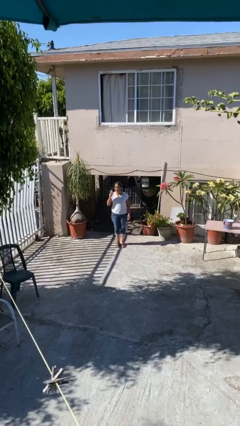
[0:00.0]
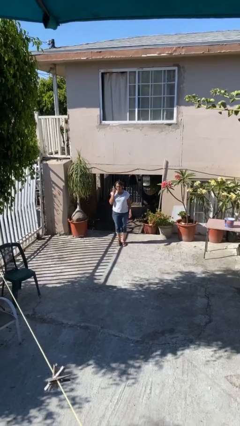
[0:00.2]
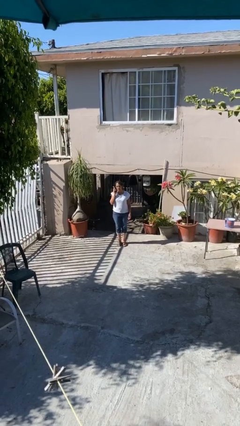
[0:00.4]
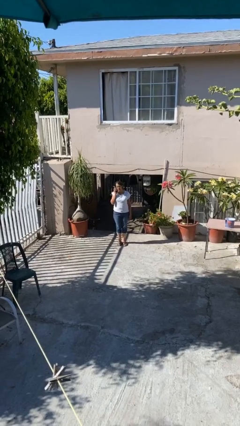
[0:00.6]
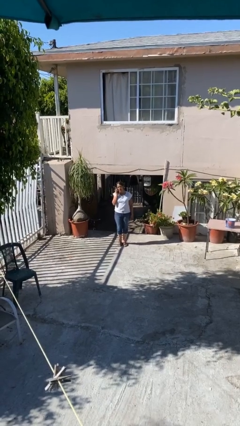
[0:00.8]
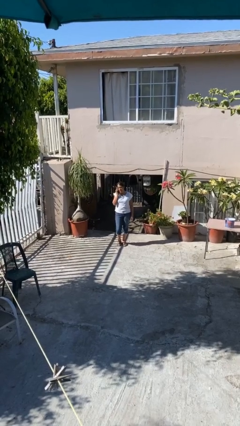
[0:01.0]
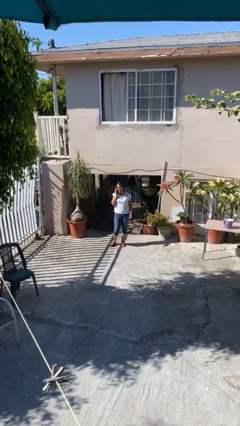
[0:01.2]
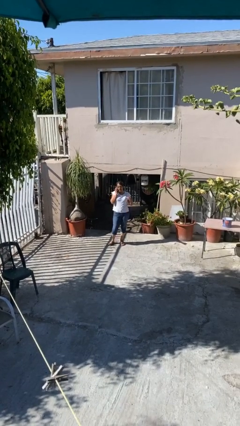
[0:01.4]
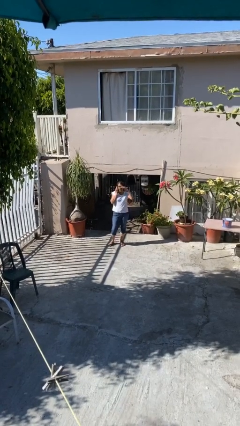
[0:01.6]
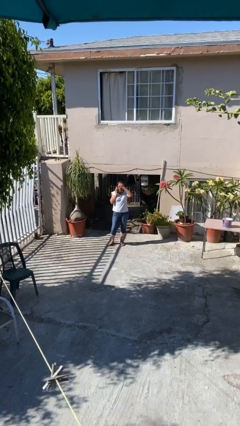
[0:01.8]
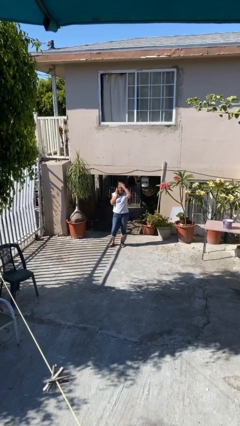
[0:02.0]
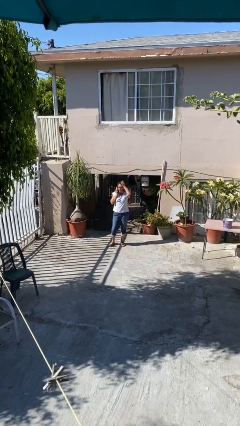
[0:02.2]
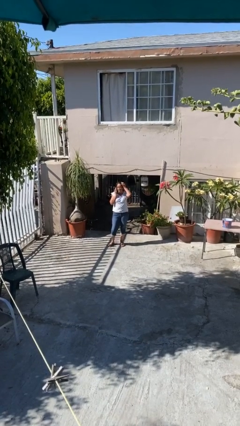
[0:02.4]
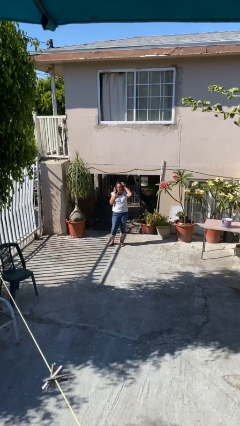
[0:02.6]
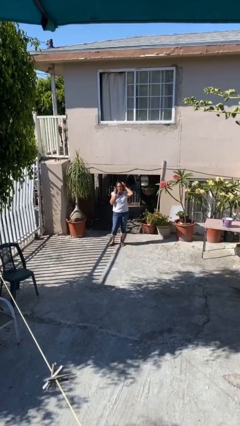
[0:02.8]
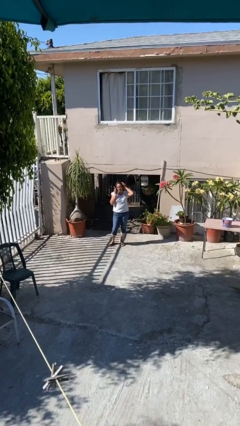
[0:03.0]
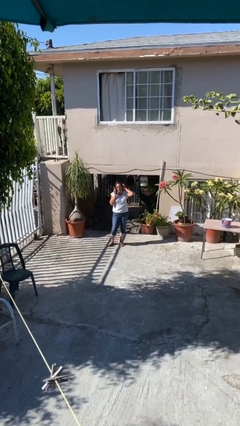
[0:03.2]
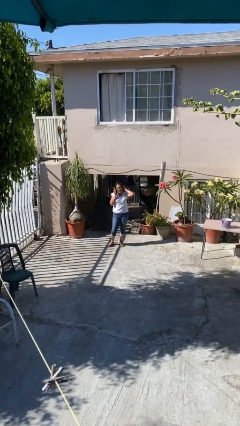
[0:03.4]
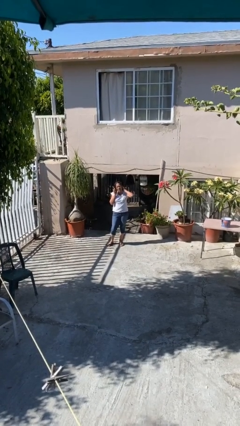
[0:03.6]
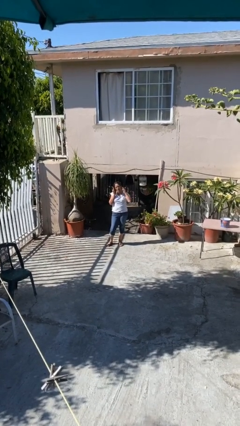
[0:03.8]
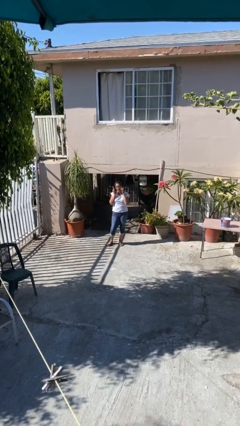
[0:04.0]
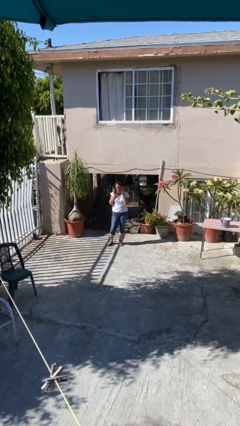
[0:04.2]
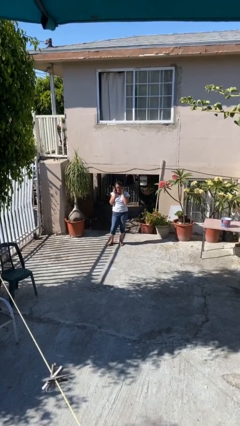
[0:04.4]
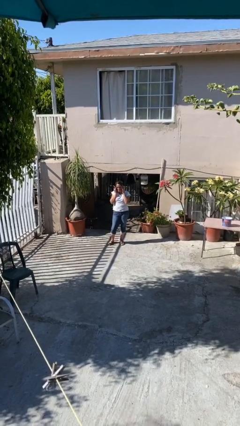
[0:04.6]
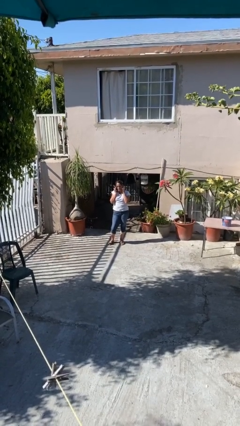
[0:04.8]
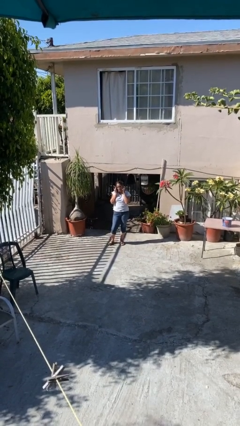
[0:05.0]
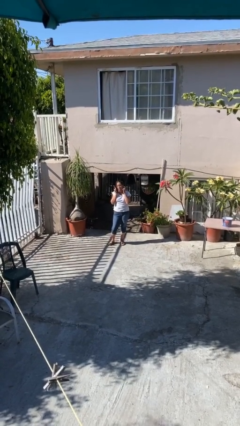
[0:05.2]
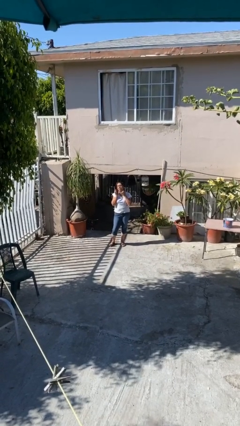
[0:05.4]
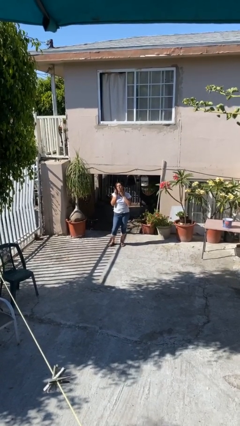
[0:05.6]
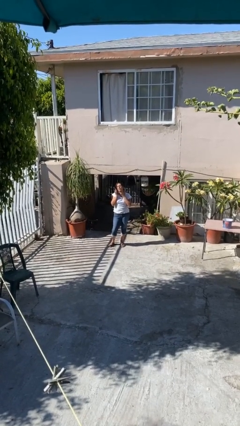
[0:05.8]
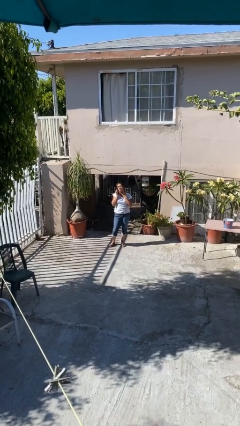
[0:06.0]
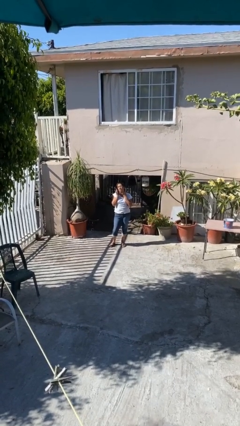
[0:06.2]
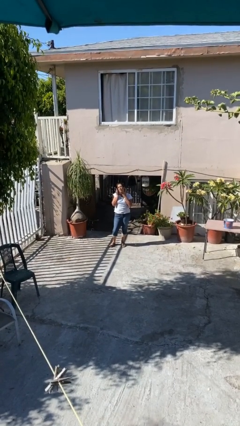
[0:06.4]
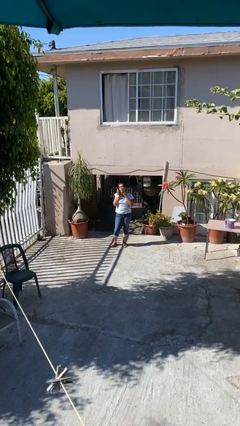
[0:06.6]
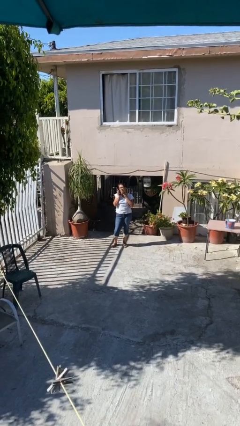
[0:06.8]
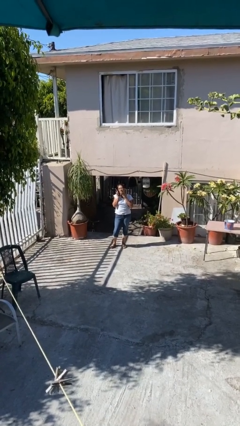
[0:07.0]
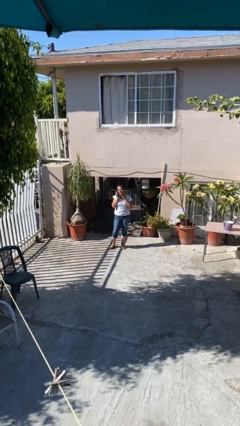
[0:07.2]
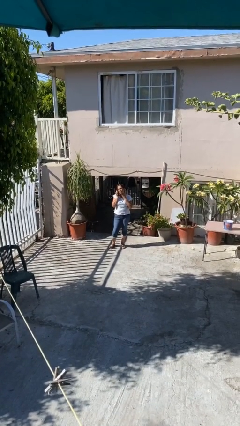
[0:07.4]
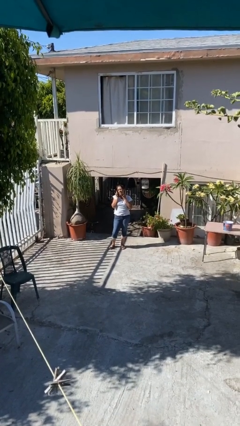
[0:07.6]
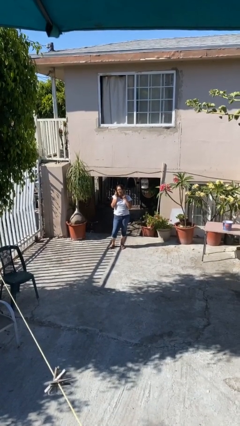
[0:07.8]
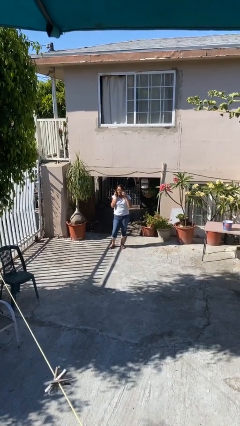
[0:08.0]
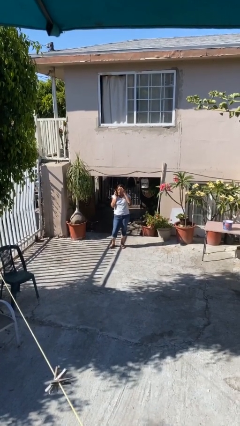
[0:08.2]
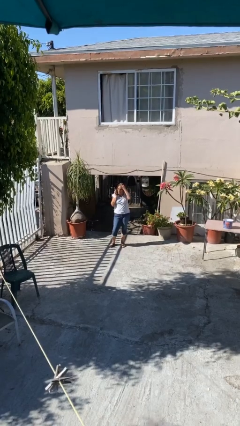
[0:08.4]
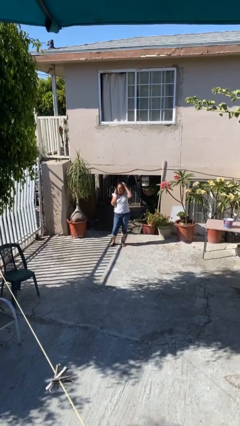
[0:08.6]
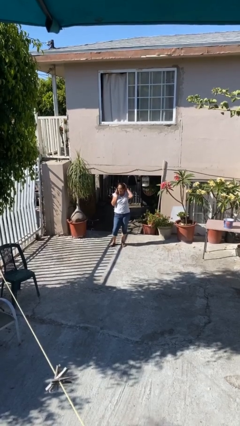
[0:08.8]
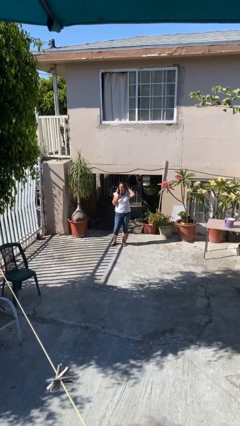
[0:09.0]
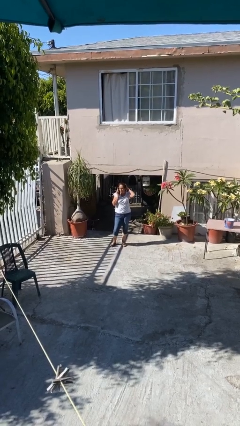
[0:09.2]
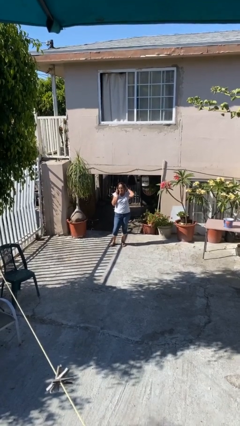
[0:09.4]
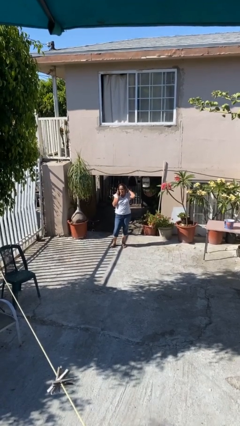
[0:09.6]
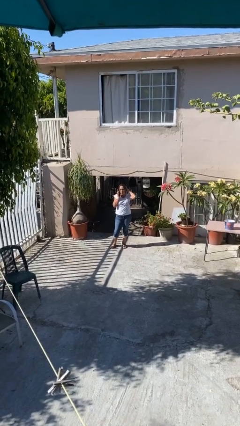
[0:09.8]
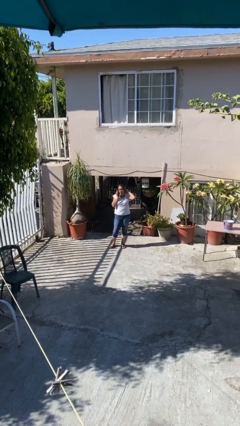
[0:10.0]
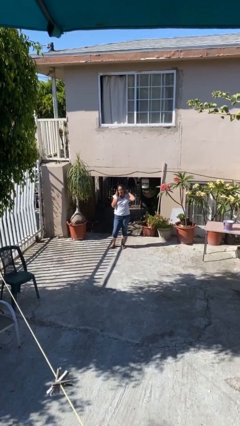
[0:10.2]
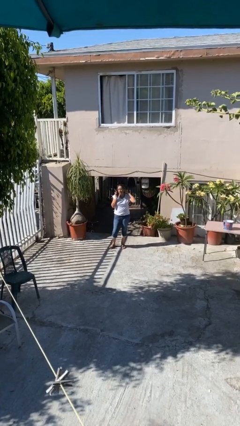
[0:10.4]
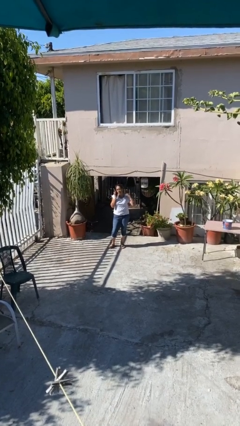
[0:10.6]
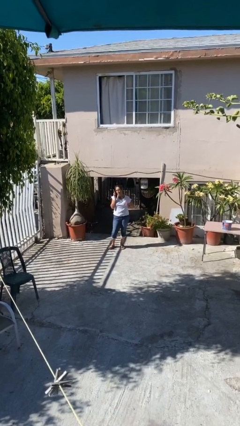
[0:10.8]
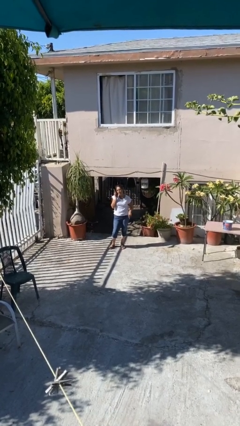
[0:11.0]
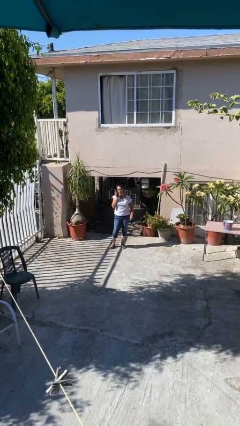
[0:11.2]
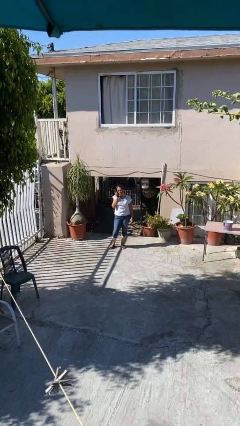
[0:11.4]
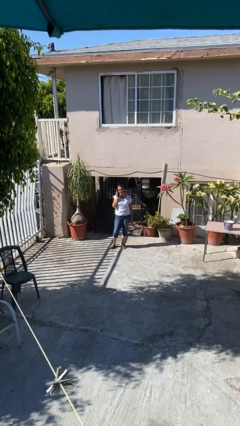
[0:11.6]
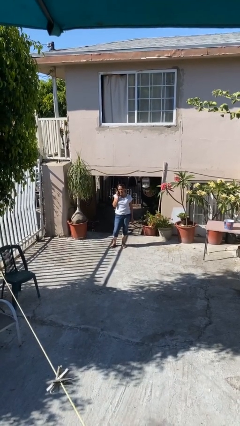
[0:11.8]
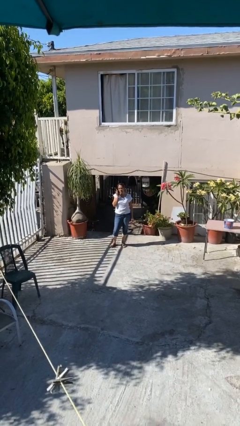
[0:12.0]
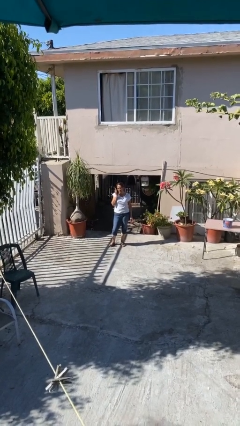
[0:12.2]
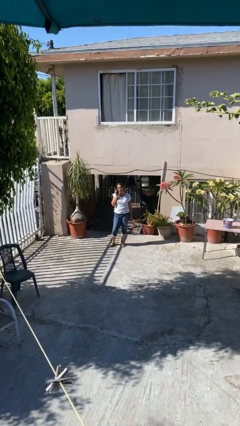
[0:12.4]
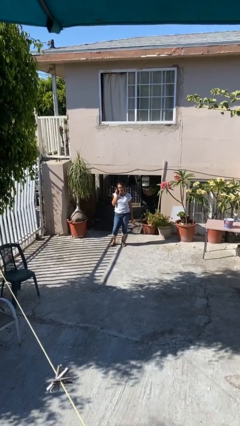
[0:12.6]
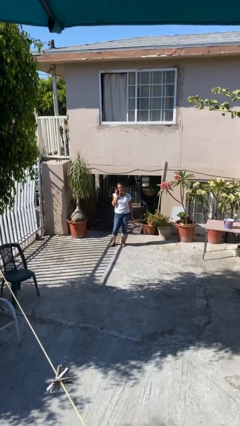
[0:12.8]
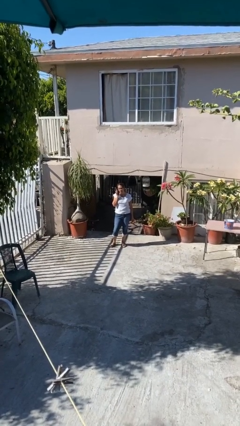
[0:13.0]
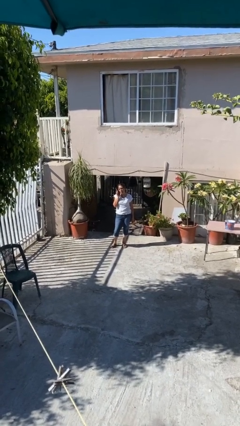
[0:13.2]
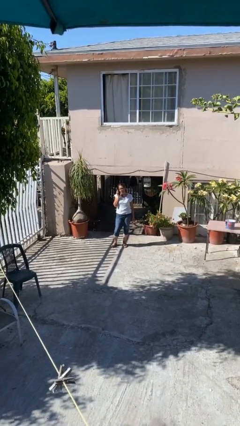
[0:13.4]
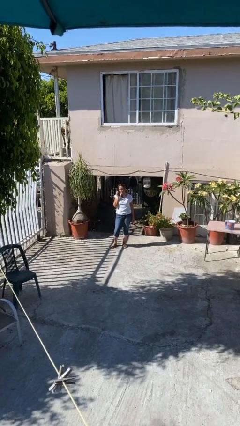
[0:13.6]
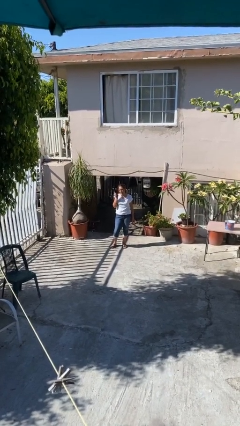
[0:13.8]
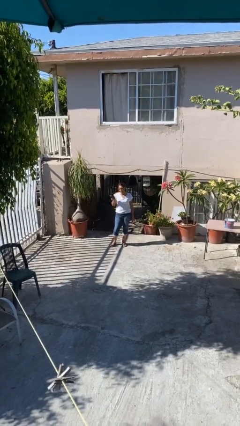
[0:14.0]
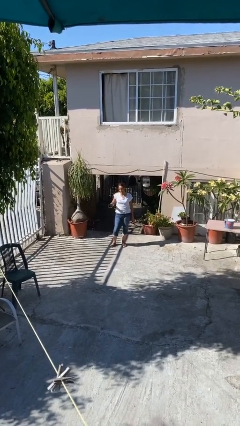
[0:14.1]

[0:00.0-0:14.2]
person talks on phone

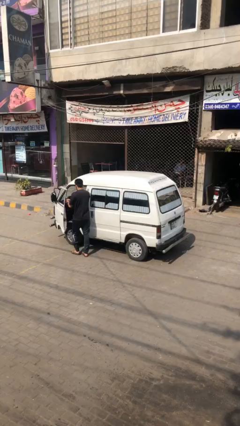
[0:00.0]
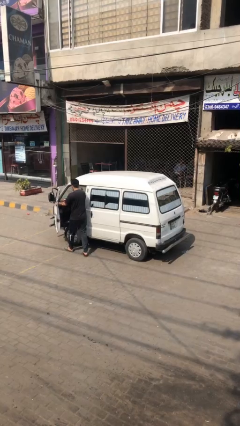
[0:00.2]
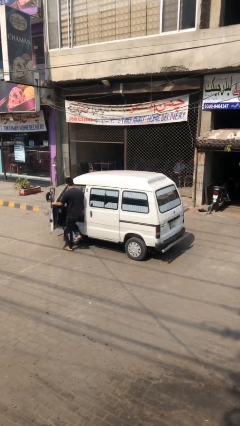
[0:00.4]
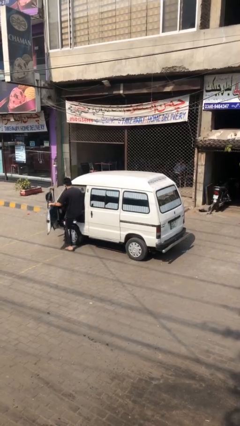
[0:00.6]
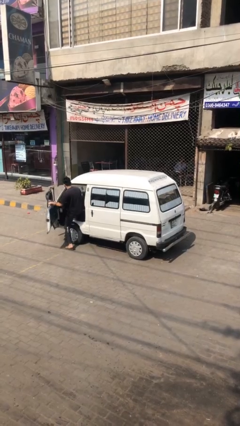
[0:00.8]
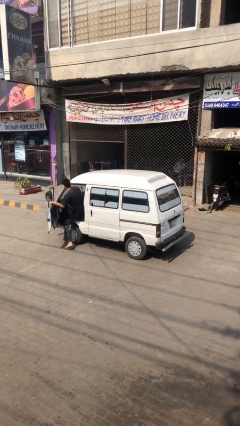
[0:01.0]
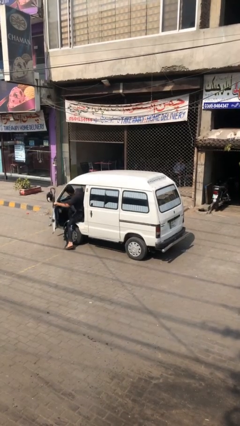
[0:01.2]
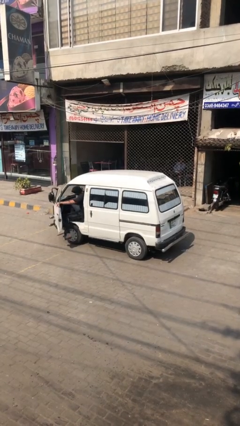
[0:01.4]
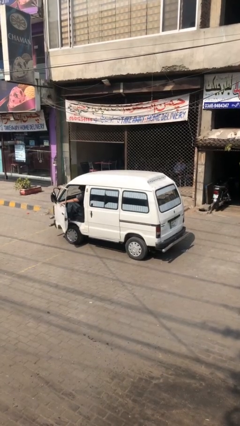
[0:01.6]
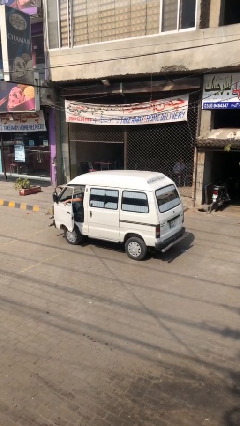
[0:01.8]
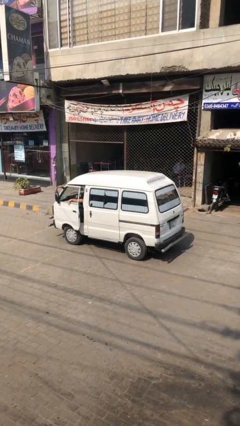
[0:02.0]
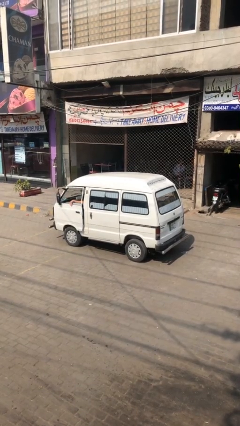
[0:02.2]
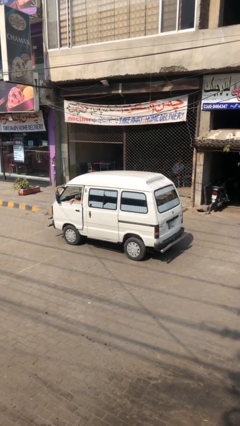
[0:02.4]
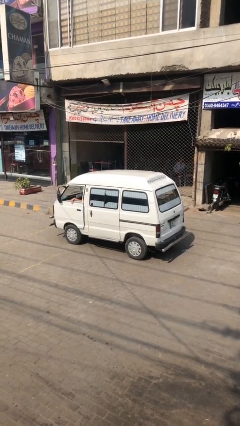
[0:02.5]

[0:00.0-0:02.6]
car picks up person

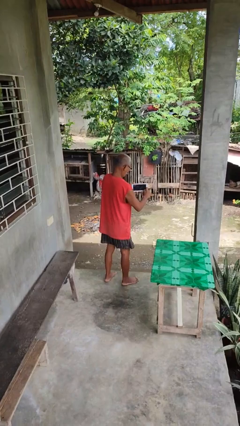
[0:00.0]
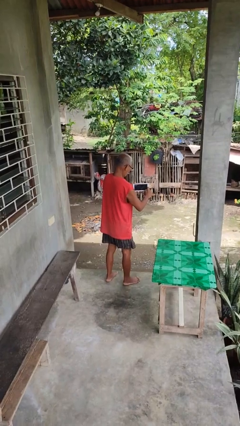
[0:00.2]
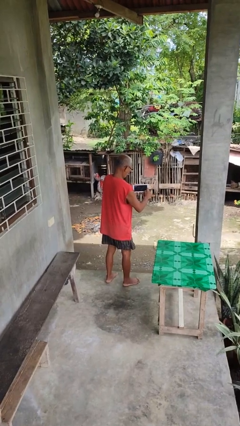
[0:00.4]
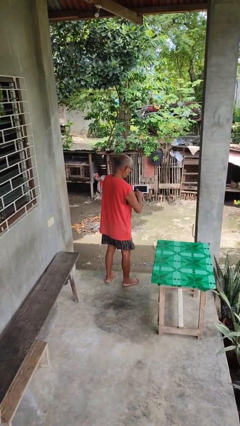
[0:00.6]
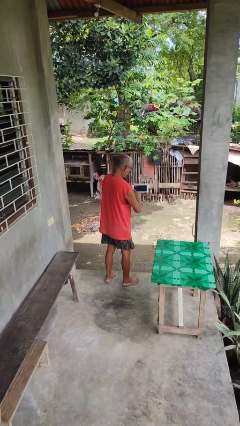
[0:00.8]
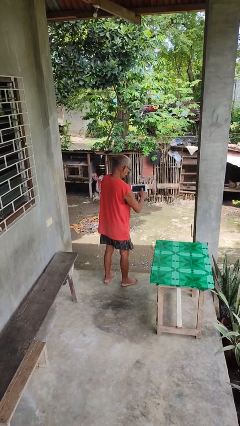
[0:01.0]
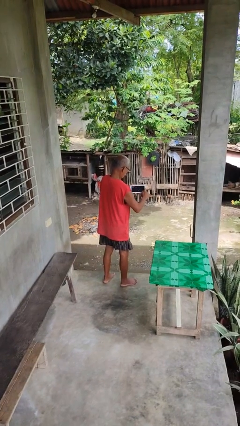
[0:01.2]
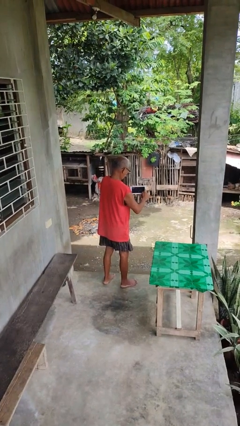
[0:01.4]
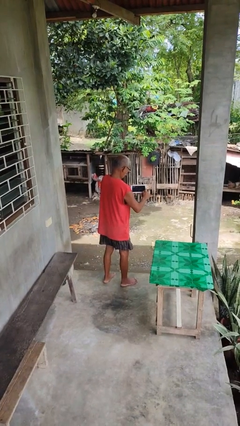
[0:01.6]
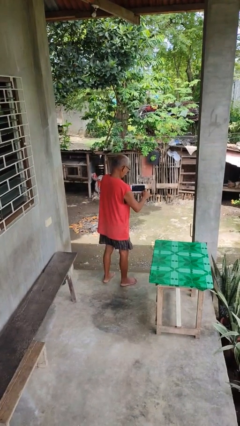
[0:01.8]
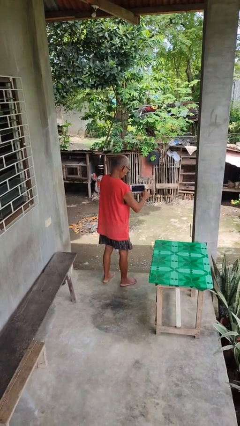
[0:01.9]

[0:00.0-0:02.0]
person interacts with tablet
